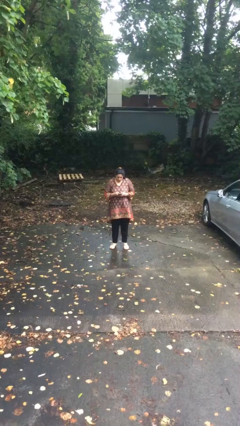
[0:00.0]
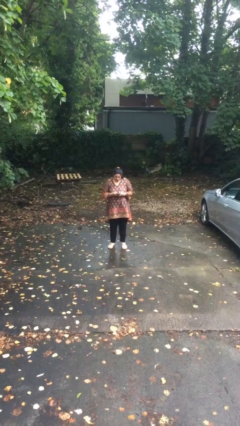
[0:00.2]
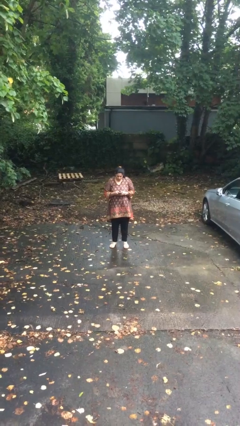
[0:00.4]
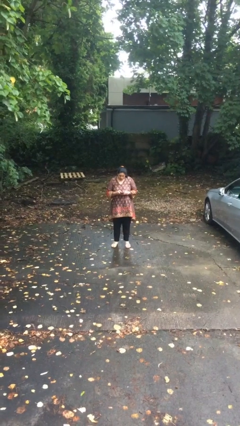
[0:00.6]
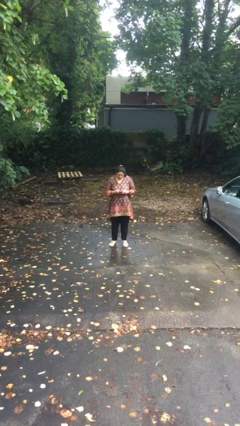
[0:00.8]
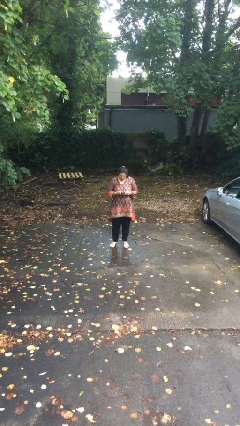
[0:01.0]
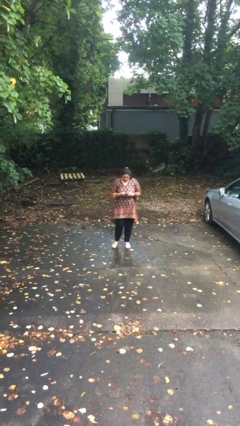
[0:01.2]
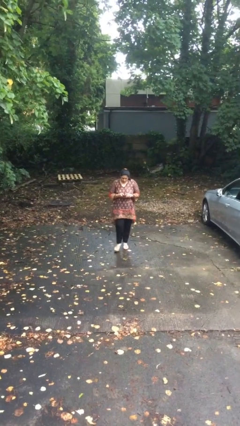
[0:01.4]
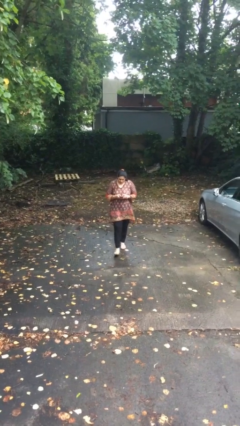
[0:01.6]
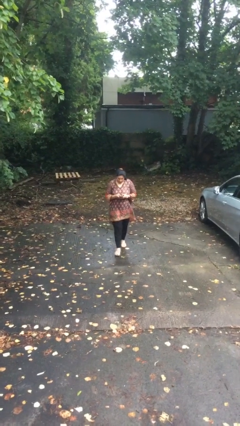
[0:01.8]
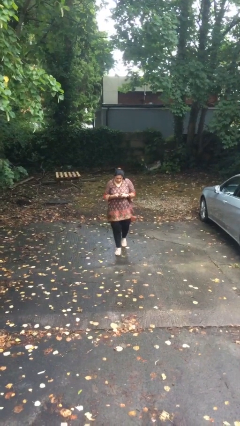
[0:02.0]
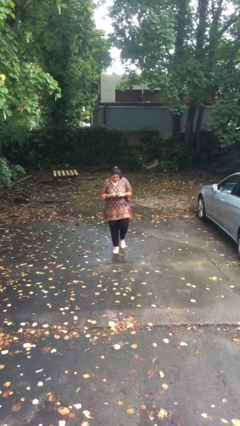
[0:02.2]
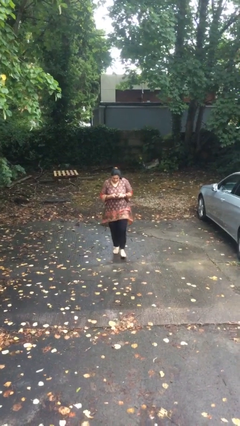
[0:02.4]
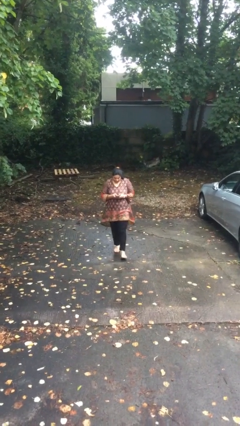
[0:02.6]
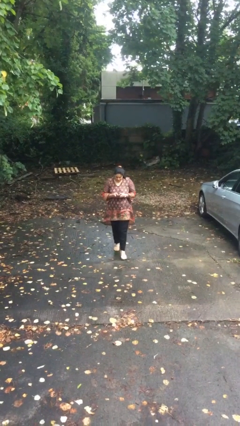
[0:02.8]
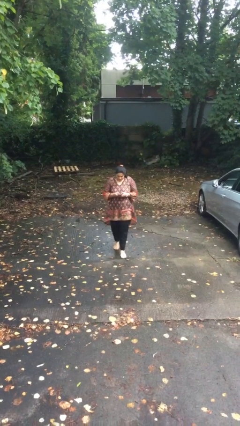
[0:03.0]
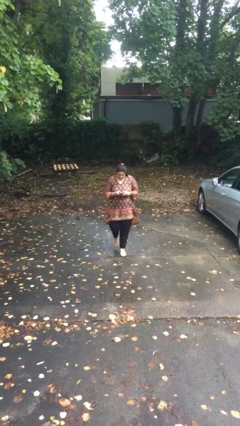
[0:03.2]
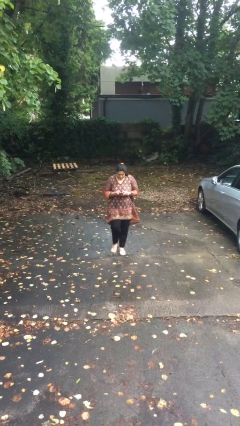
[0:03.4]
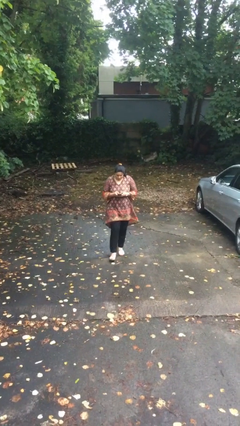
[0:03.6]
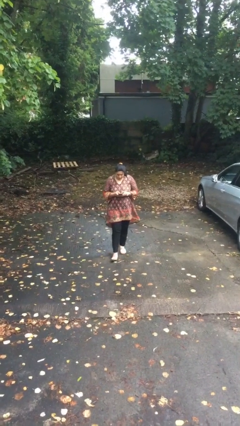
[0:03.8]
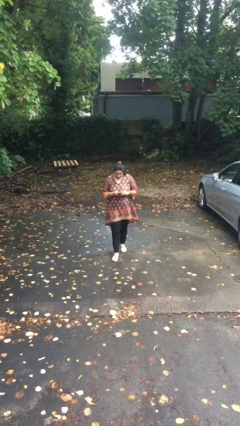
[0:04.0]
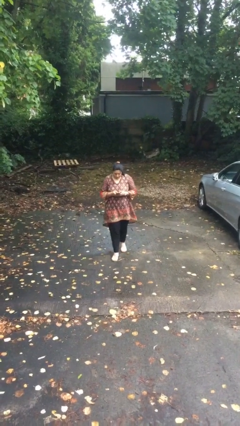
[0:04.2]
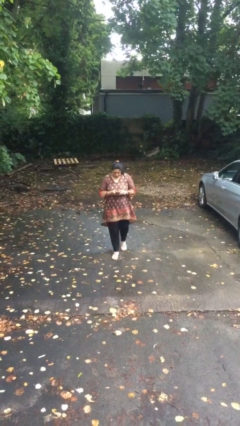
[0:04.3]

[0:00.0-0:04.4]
person texts on phone

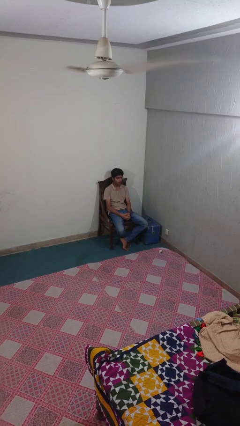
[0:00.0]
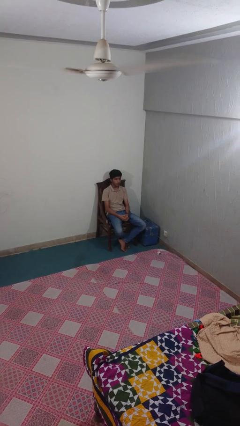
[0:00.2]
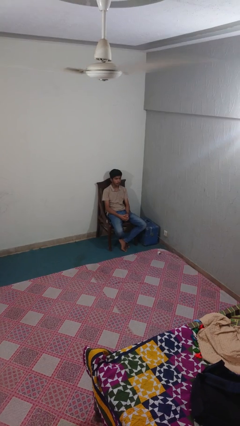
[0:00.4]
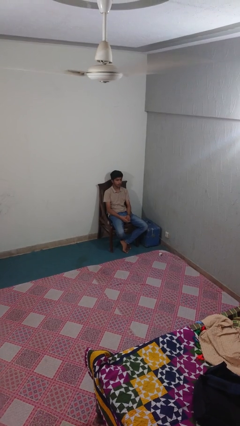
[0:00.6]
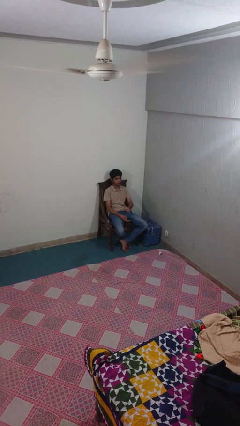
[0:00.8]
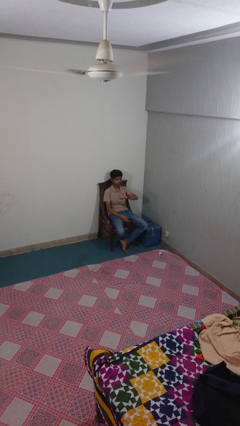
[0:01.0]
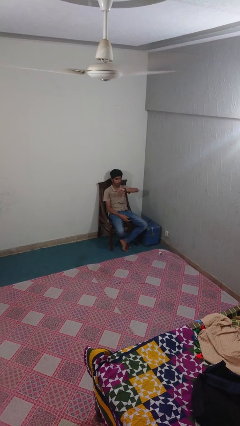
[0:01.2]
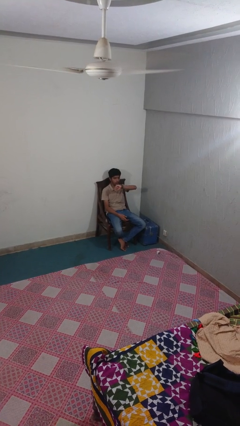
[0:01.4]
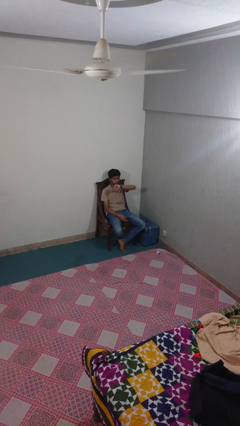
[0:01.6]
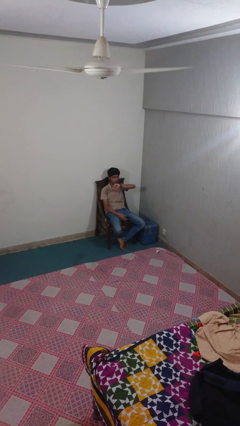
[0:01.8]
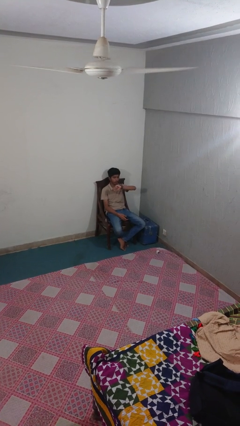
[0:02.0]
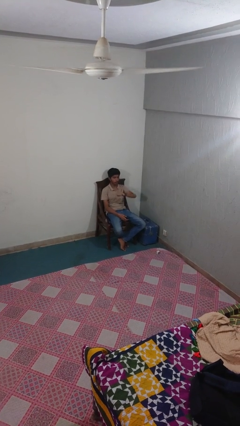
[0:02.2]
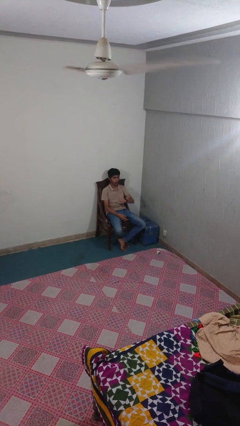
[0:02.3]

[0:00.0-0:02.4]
person looks at wristwatch

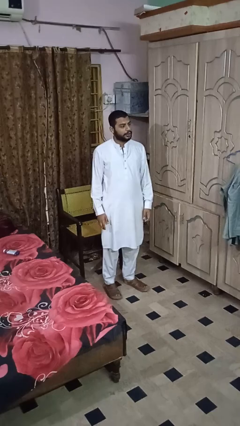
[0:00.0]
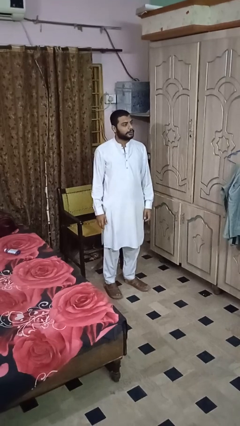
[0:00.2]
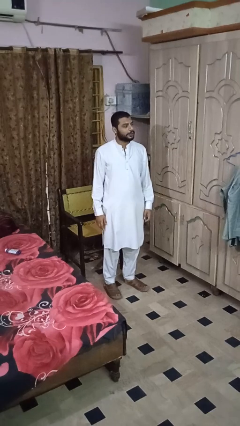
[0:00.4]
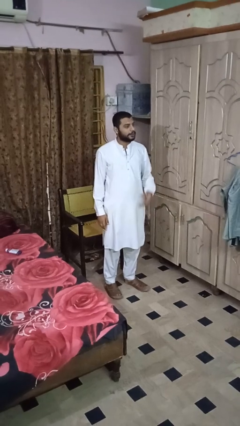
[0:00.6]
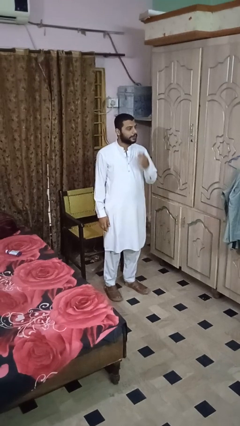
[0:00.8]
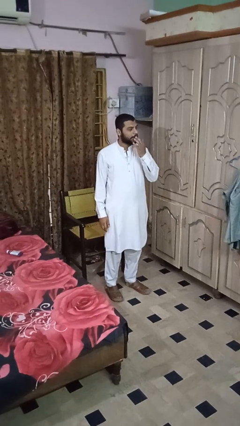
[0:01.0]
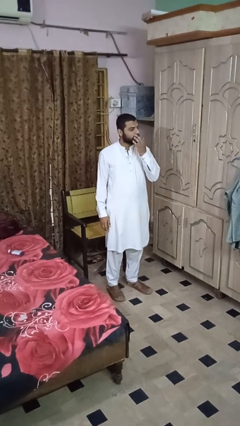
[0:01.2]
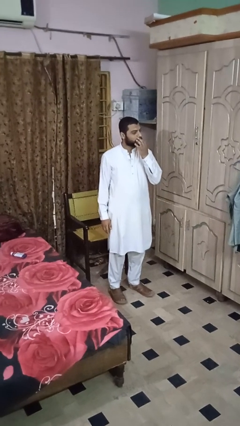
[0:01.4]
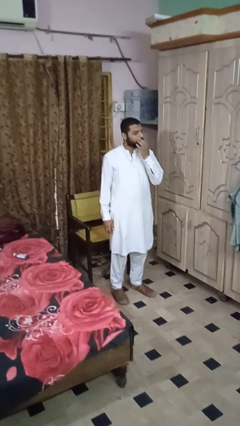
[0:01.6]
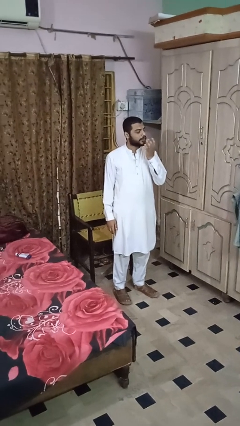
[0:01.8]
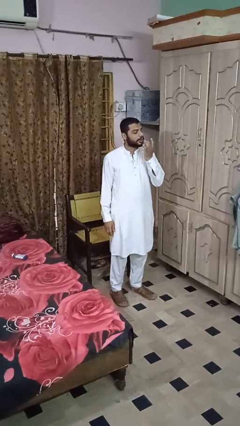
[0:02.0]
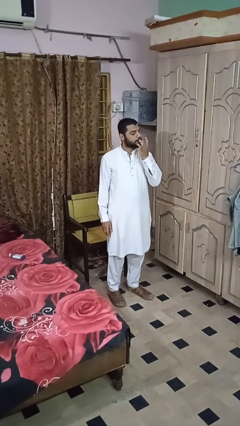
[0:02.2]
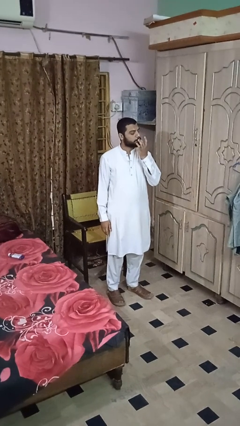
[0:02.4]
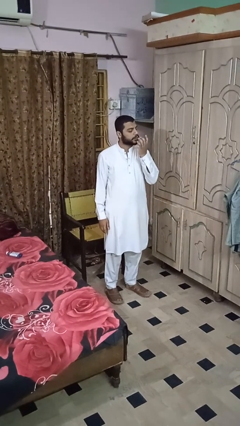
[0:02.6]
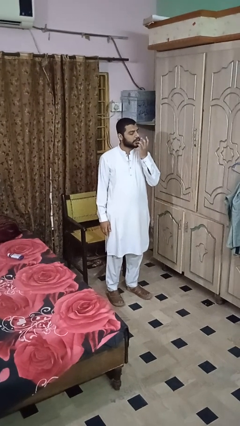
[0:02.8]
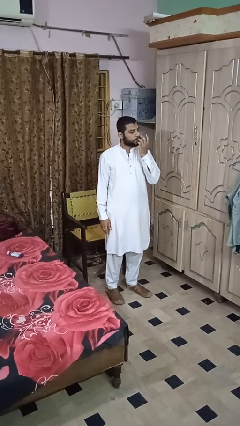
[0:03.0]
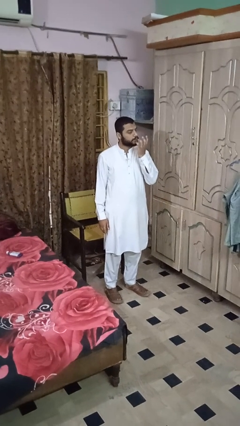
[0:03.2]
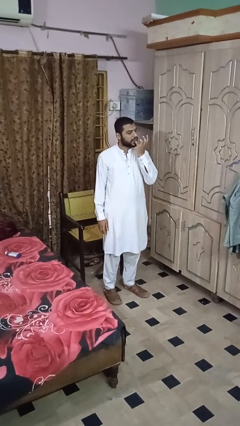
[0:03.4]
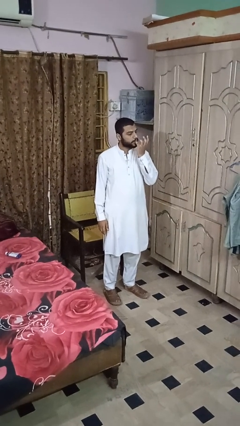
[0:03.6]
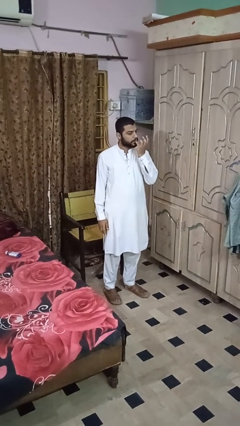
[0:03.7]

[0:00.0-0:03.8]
person licks fingers

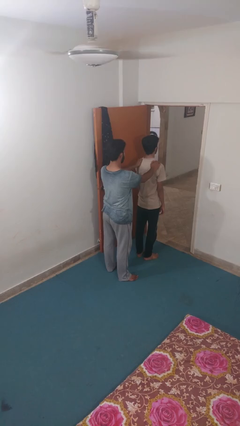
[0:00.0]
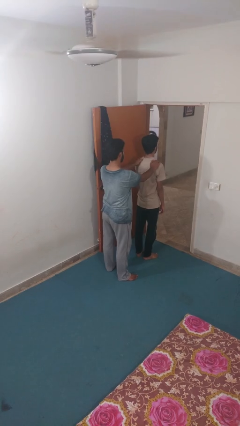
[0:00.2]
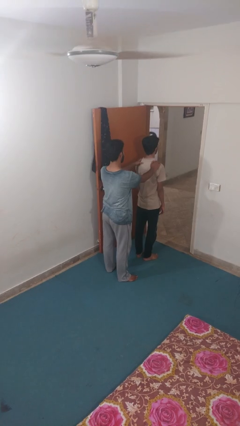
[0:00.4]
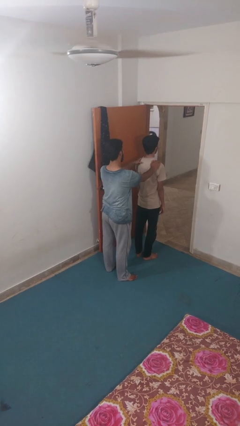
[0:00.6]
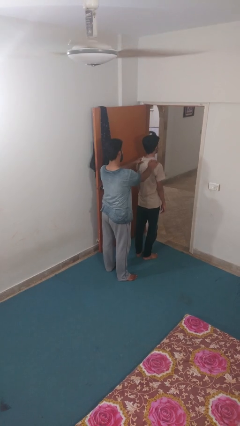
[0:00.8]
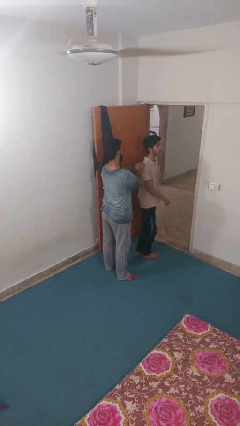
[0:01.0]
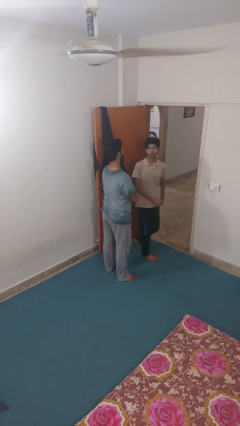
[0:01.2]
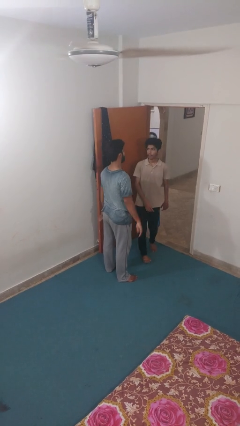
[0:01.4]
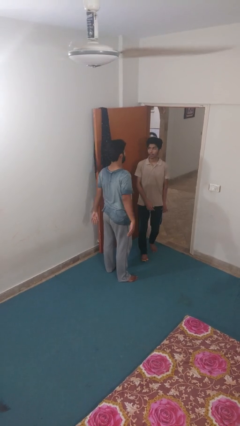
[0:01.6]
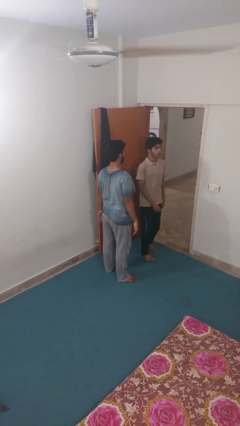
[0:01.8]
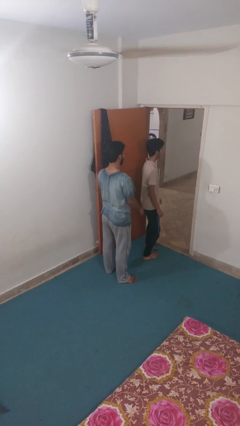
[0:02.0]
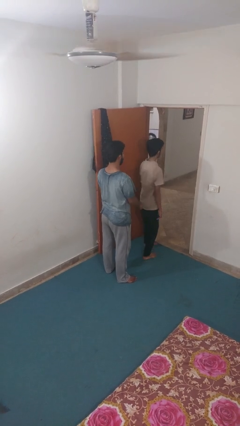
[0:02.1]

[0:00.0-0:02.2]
person spins person around

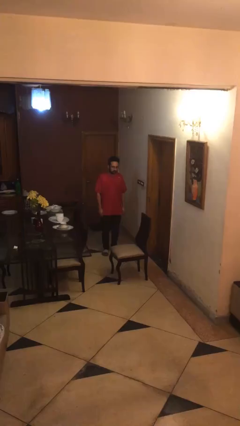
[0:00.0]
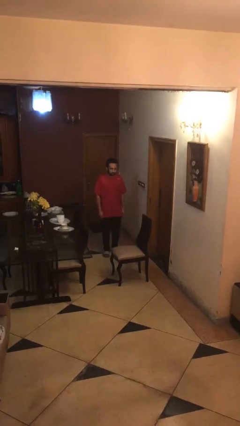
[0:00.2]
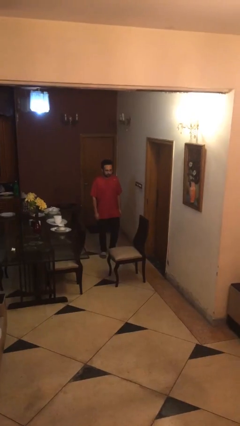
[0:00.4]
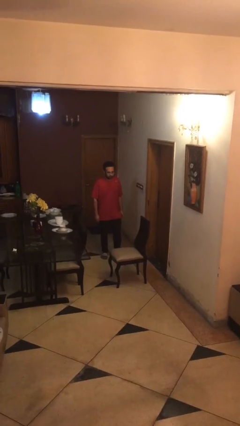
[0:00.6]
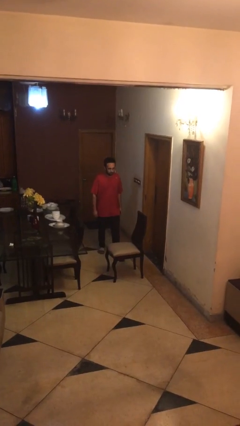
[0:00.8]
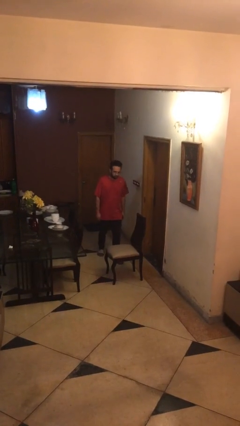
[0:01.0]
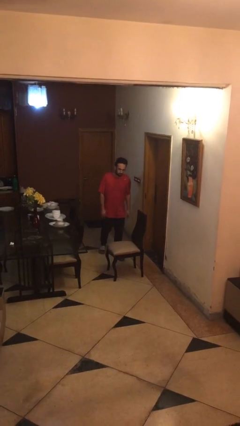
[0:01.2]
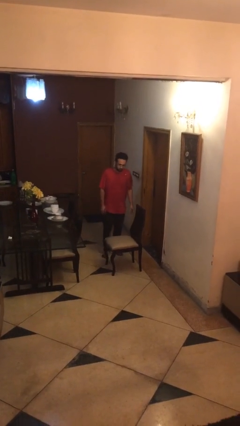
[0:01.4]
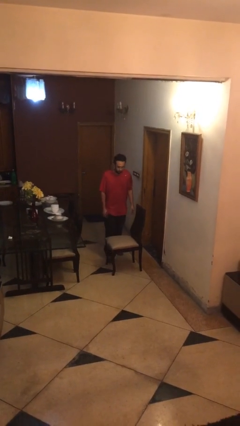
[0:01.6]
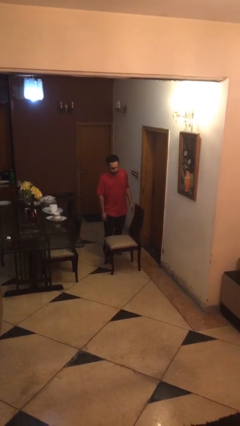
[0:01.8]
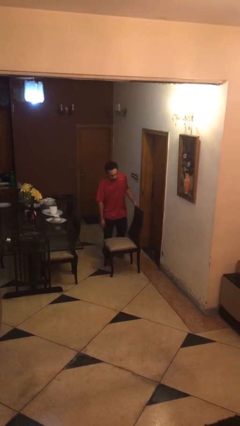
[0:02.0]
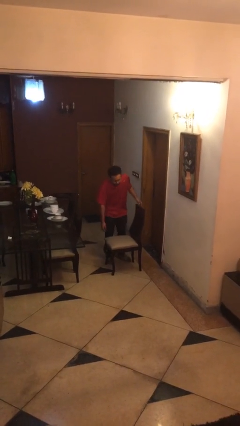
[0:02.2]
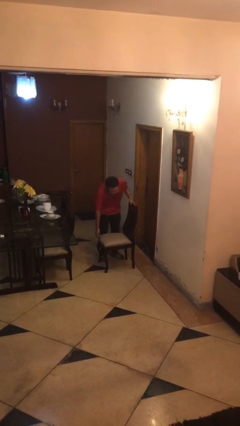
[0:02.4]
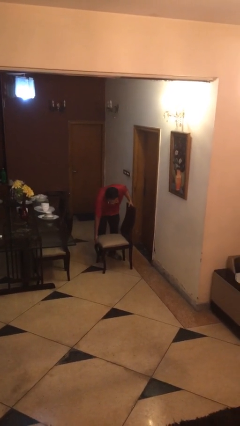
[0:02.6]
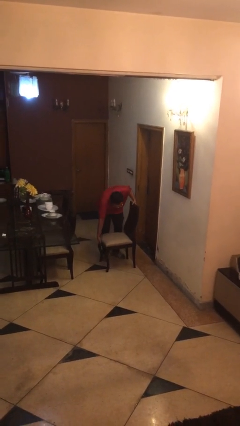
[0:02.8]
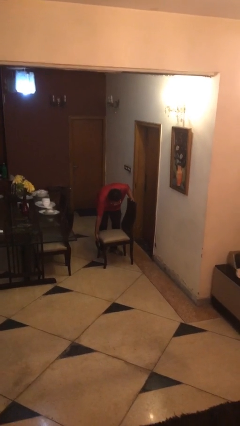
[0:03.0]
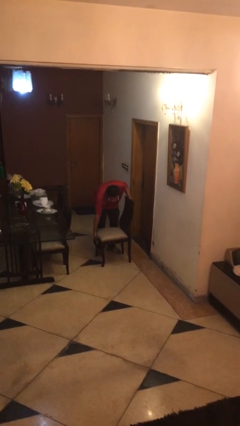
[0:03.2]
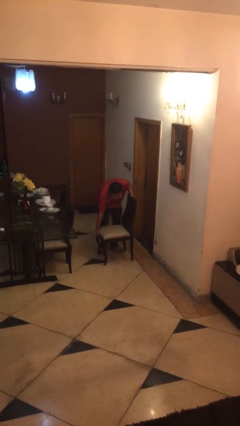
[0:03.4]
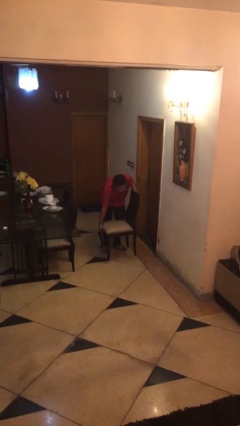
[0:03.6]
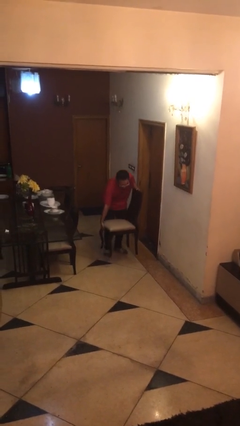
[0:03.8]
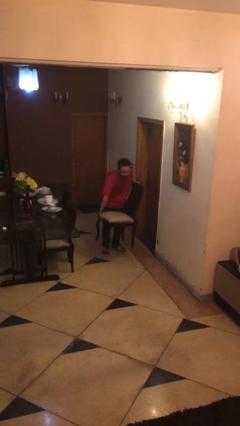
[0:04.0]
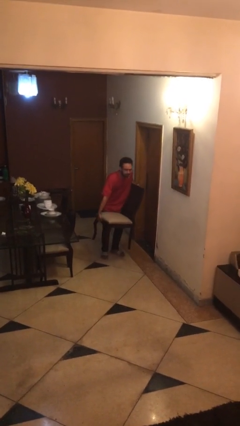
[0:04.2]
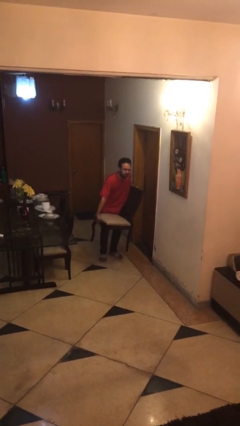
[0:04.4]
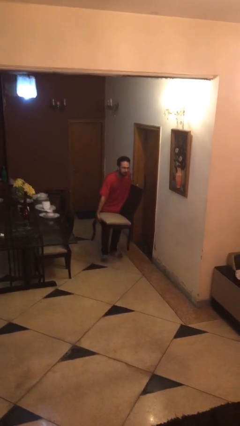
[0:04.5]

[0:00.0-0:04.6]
person picks up object from floor
